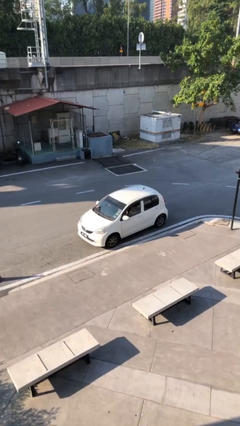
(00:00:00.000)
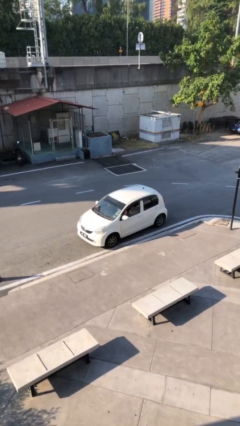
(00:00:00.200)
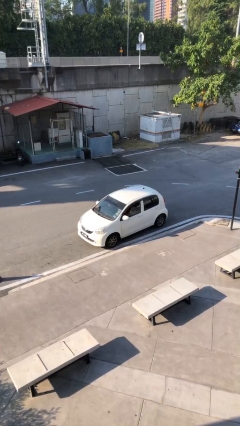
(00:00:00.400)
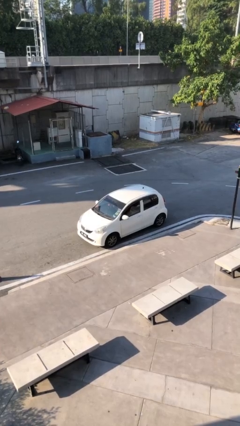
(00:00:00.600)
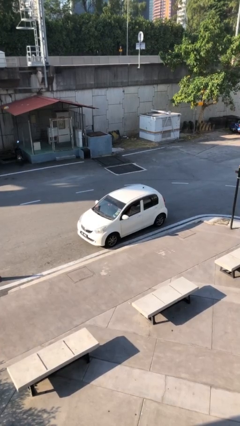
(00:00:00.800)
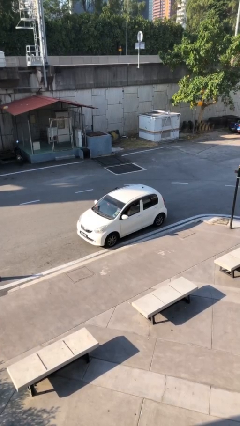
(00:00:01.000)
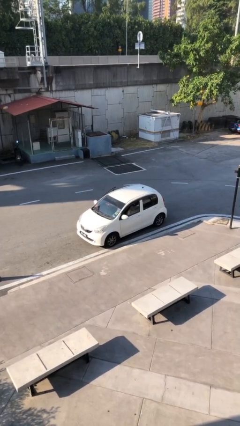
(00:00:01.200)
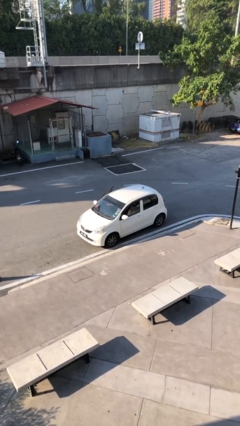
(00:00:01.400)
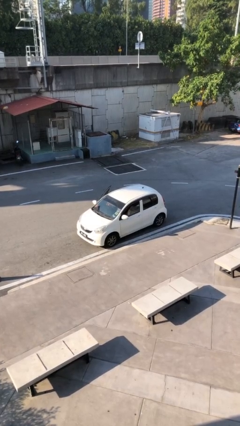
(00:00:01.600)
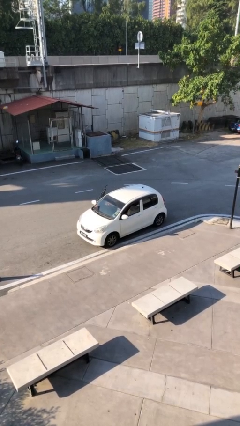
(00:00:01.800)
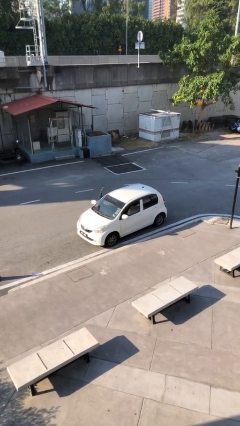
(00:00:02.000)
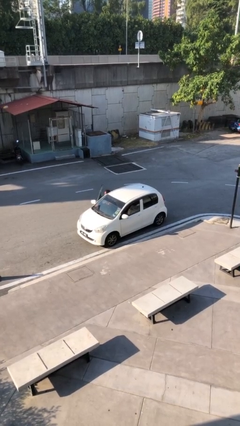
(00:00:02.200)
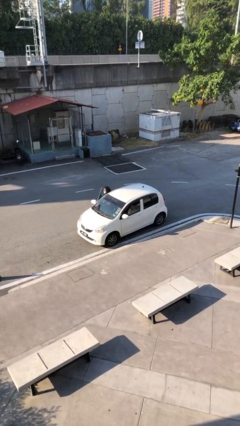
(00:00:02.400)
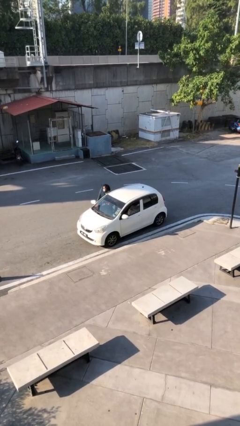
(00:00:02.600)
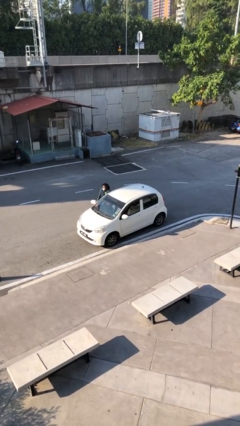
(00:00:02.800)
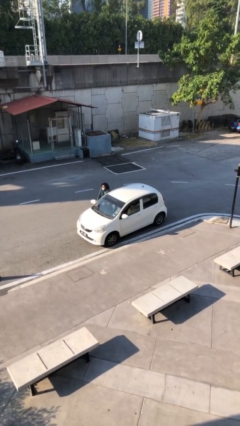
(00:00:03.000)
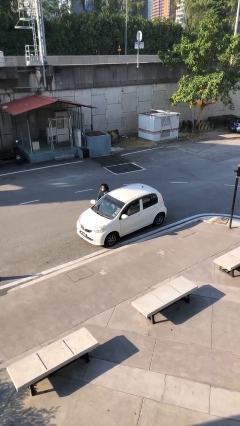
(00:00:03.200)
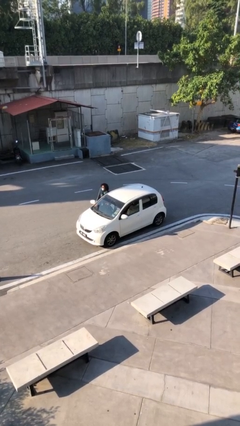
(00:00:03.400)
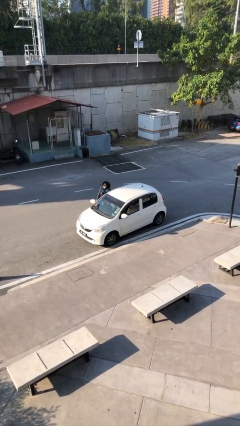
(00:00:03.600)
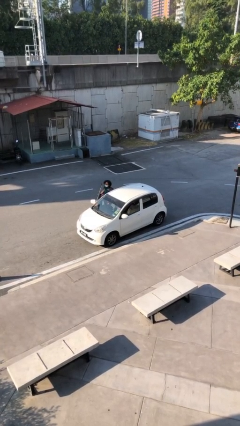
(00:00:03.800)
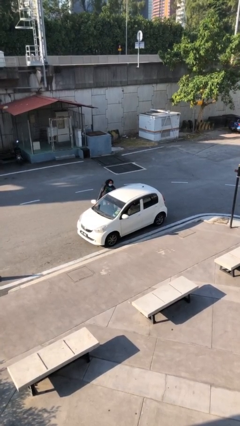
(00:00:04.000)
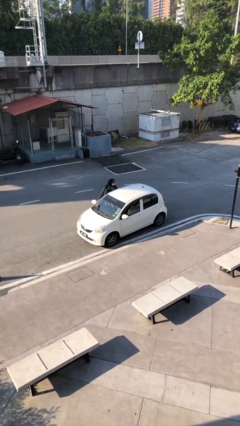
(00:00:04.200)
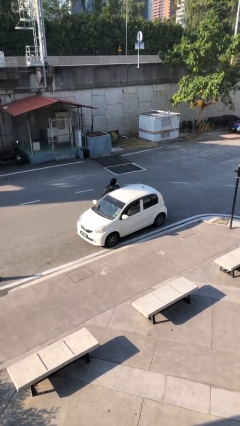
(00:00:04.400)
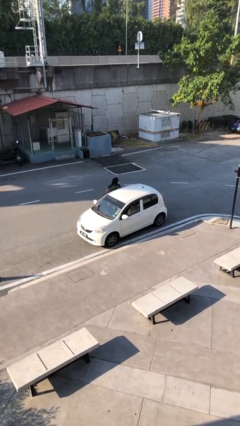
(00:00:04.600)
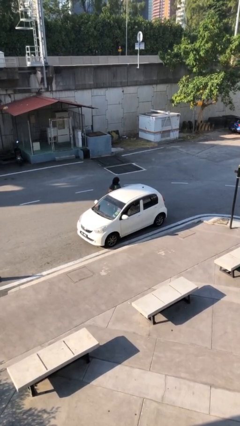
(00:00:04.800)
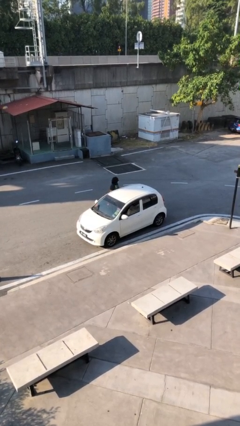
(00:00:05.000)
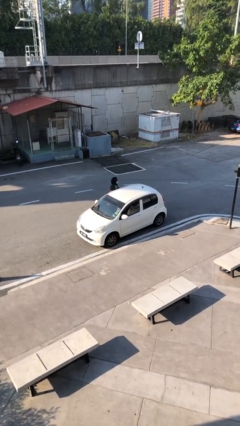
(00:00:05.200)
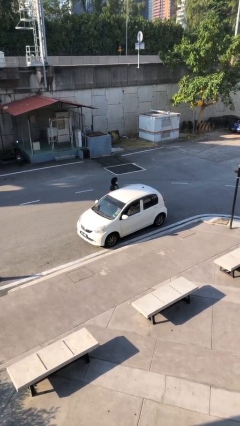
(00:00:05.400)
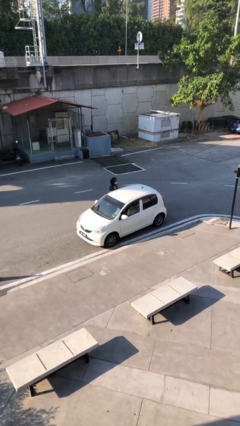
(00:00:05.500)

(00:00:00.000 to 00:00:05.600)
car drops off person

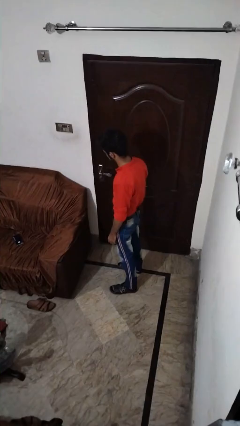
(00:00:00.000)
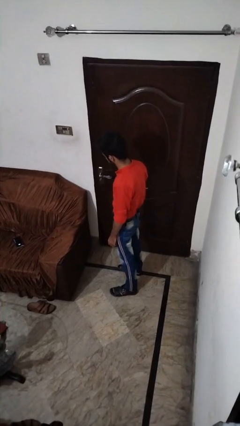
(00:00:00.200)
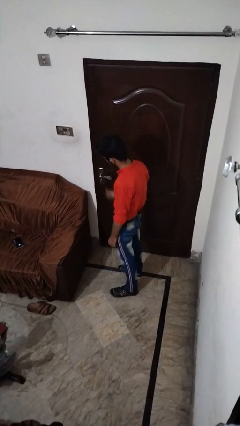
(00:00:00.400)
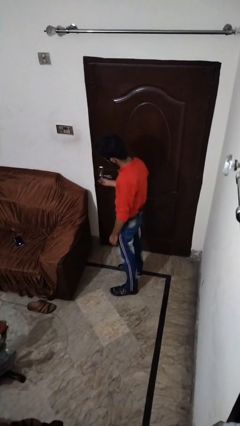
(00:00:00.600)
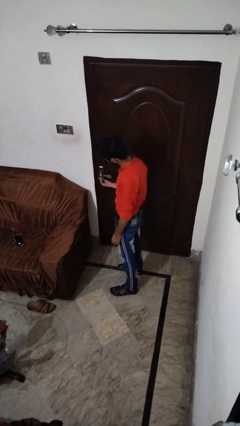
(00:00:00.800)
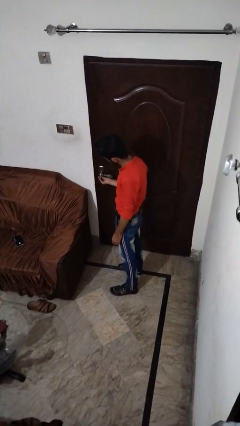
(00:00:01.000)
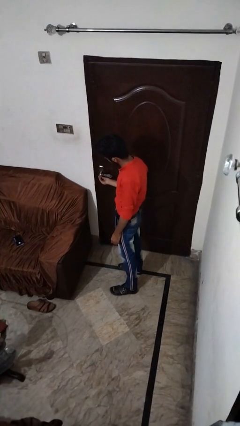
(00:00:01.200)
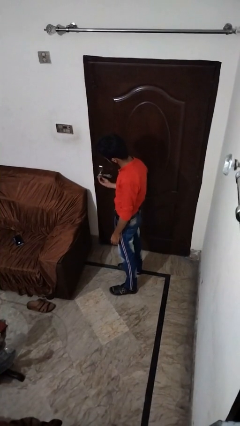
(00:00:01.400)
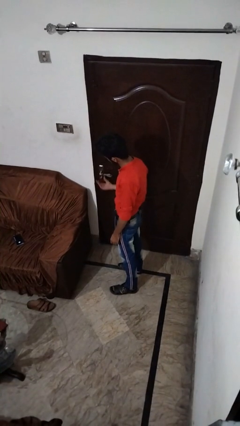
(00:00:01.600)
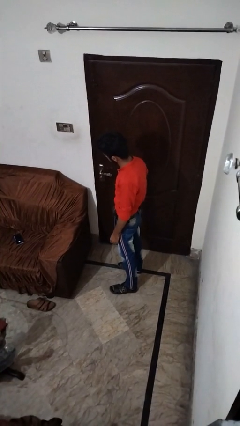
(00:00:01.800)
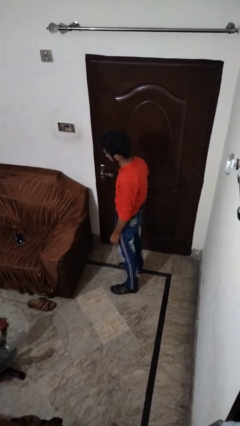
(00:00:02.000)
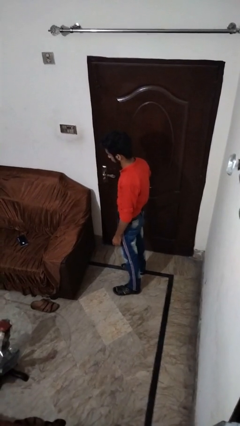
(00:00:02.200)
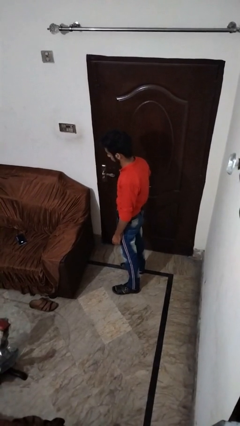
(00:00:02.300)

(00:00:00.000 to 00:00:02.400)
person unlocks door with keys

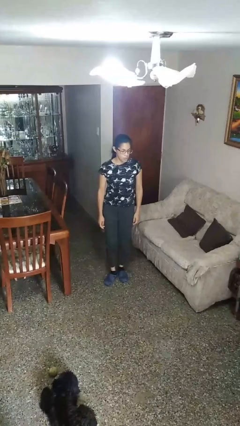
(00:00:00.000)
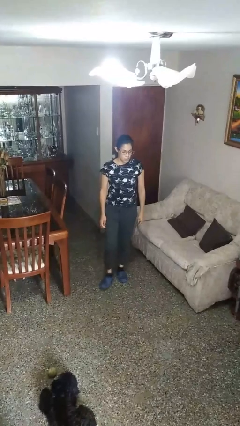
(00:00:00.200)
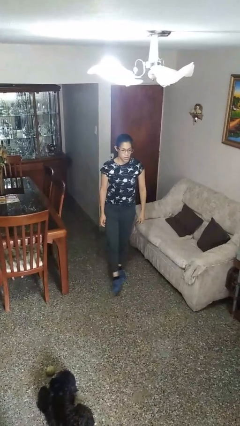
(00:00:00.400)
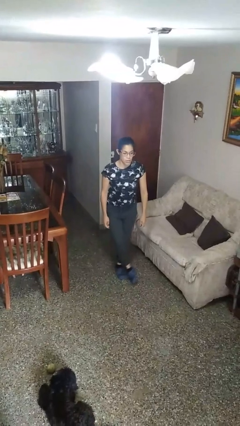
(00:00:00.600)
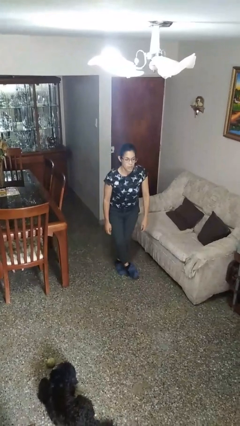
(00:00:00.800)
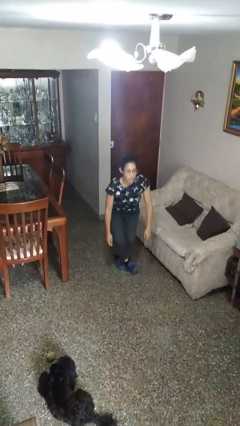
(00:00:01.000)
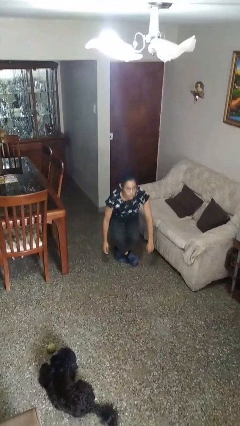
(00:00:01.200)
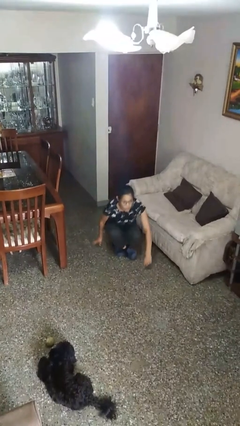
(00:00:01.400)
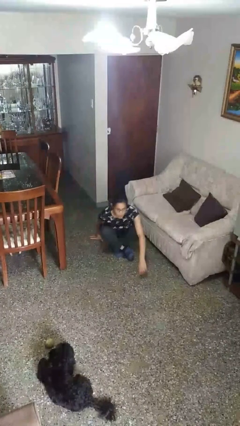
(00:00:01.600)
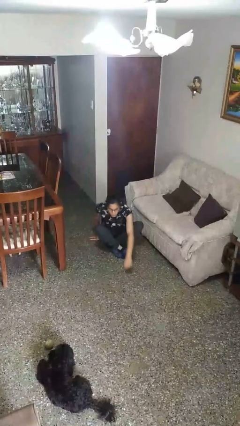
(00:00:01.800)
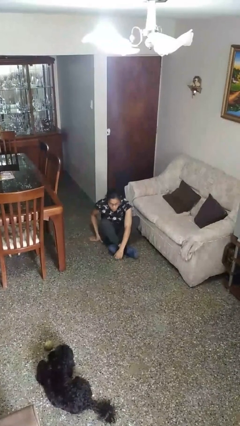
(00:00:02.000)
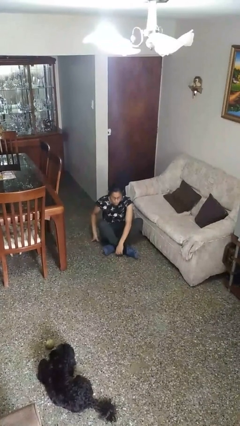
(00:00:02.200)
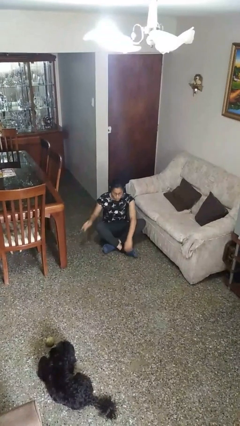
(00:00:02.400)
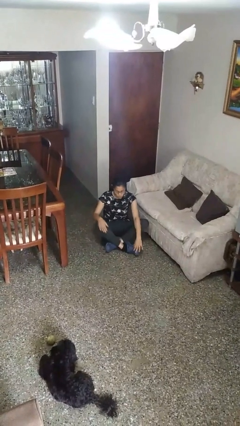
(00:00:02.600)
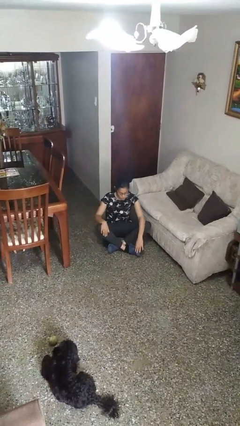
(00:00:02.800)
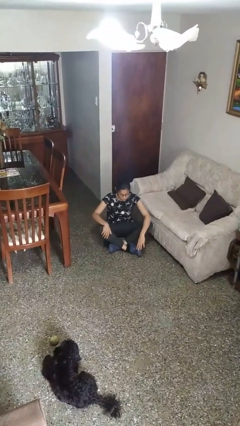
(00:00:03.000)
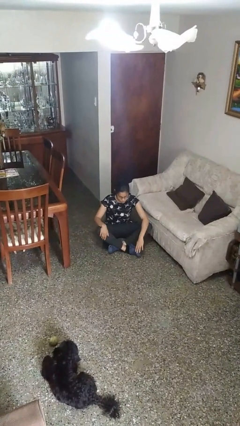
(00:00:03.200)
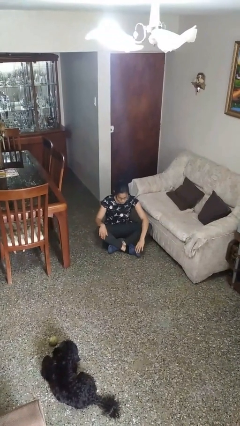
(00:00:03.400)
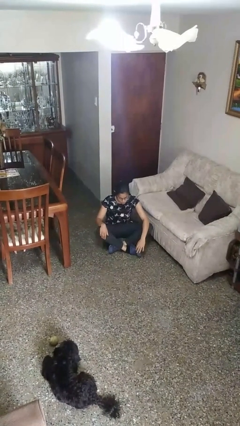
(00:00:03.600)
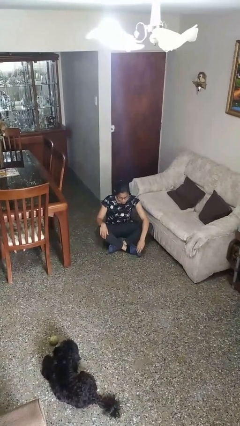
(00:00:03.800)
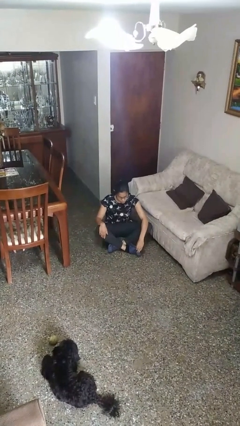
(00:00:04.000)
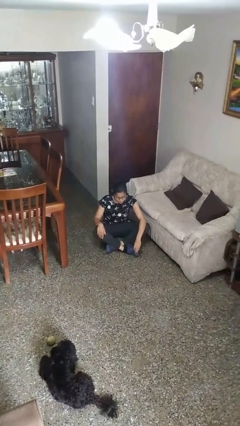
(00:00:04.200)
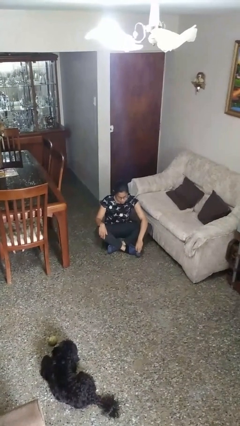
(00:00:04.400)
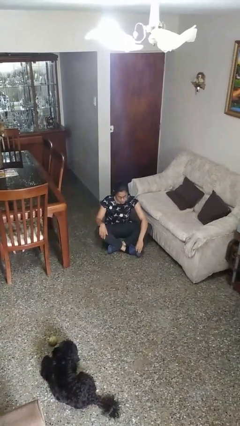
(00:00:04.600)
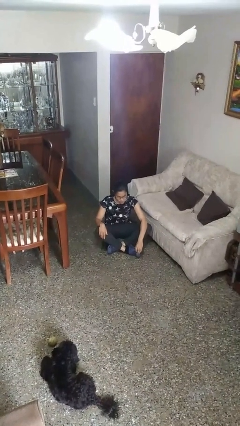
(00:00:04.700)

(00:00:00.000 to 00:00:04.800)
person sits crisscross

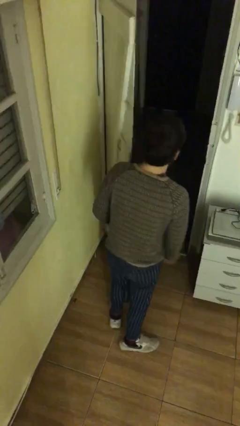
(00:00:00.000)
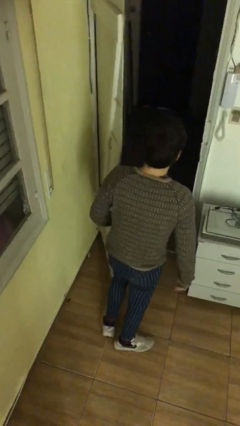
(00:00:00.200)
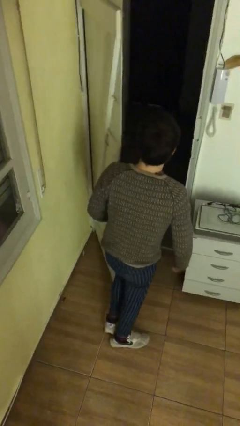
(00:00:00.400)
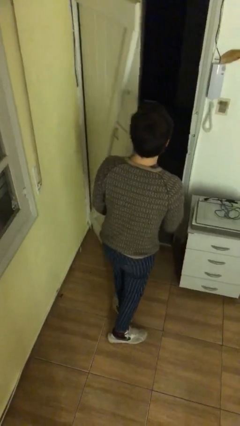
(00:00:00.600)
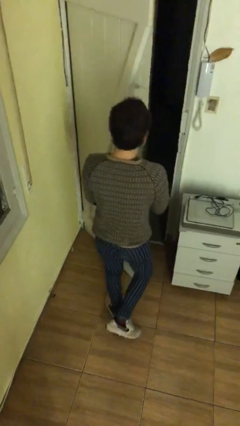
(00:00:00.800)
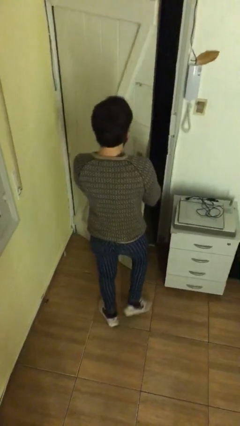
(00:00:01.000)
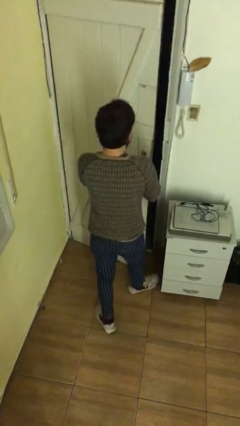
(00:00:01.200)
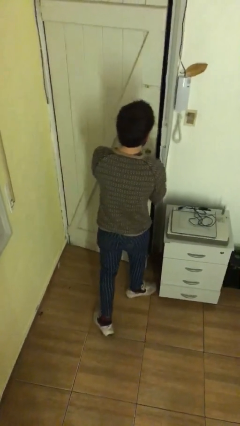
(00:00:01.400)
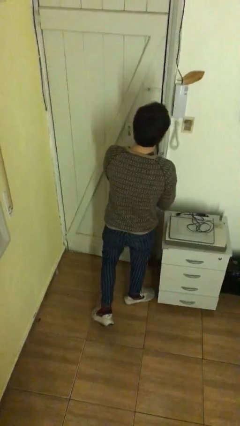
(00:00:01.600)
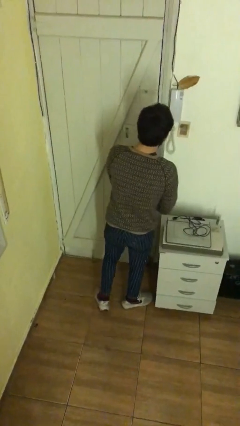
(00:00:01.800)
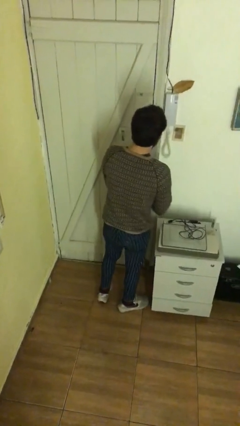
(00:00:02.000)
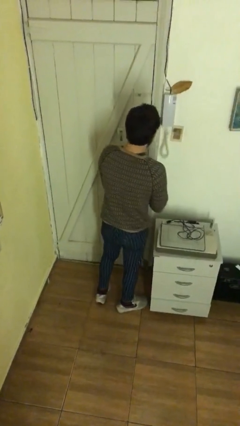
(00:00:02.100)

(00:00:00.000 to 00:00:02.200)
person closes facility door

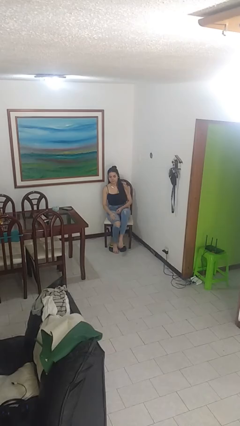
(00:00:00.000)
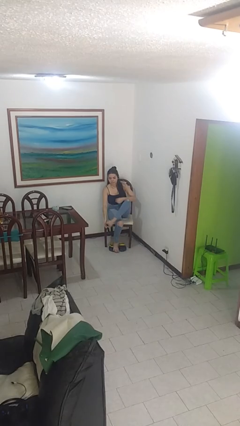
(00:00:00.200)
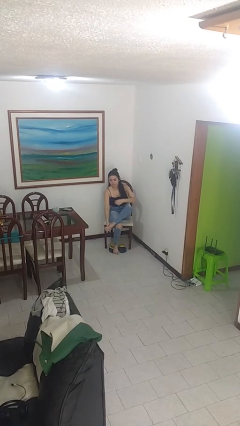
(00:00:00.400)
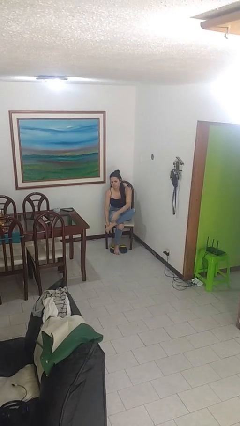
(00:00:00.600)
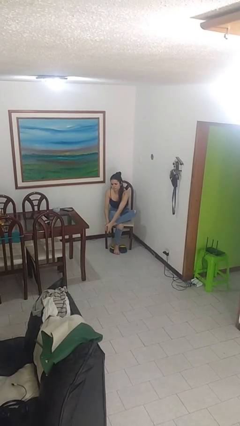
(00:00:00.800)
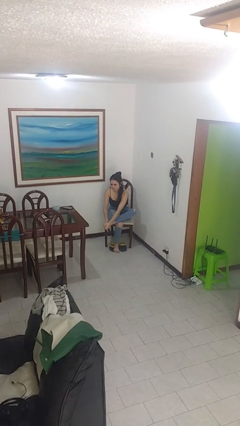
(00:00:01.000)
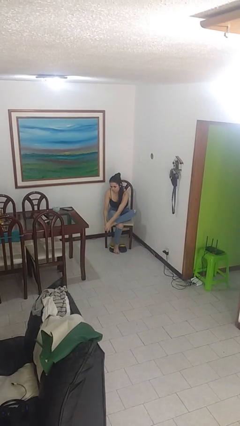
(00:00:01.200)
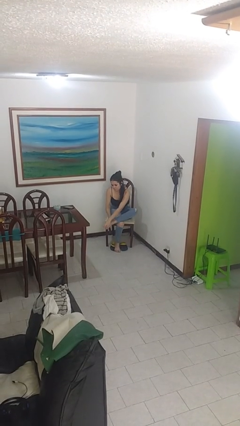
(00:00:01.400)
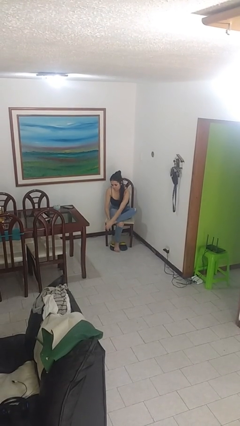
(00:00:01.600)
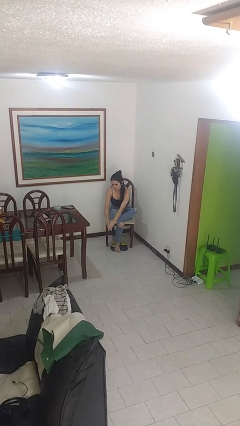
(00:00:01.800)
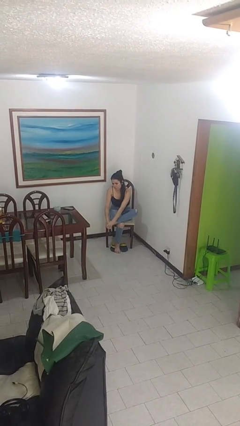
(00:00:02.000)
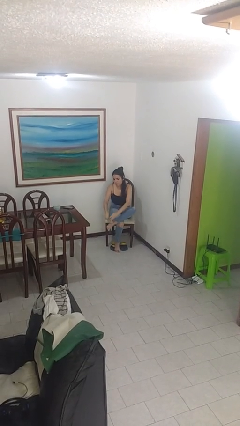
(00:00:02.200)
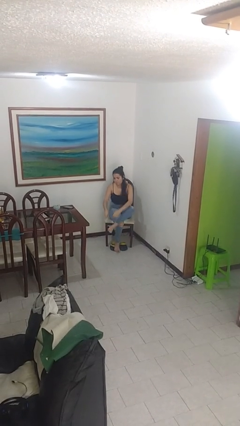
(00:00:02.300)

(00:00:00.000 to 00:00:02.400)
person rubs foot
